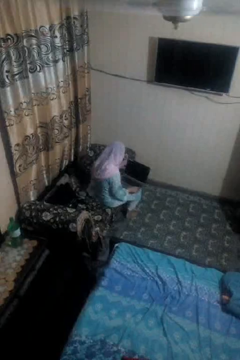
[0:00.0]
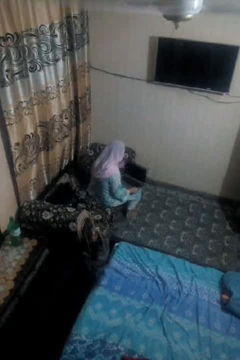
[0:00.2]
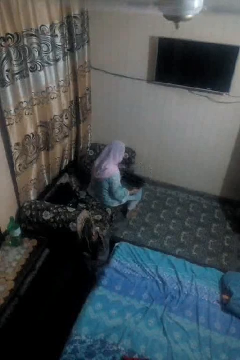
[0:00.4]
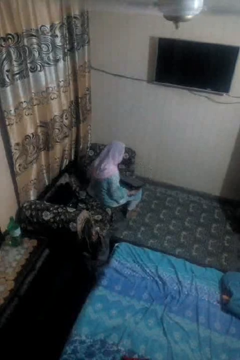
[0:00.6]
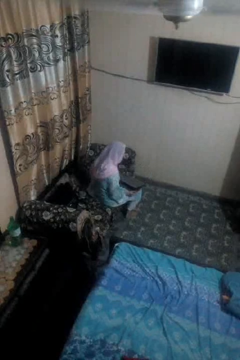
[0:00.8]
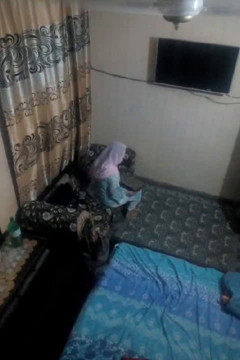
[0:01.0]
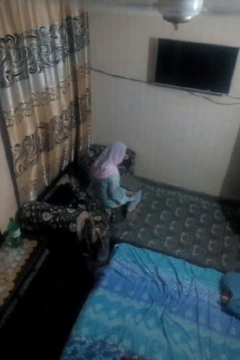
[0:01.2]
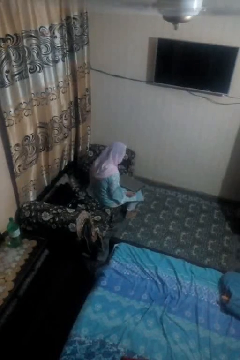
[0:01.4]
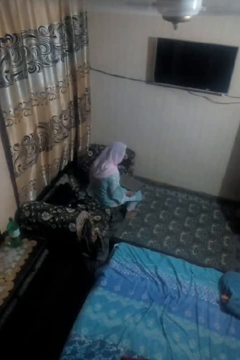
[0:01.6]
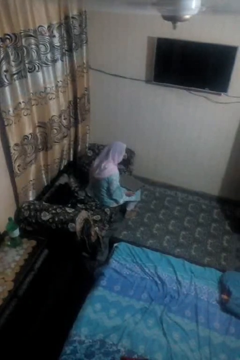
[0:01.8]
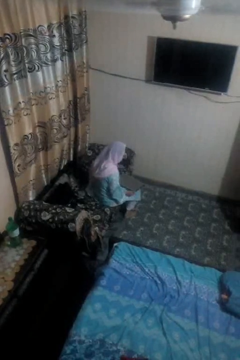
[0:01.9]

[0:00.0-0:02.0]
person closes laptop

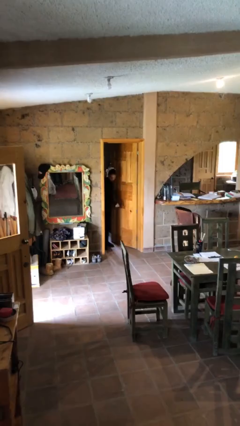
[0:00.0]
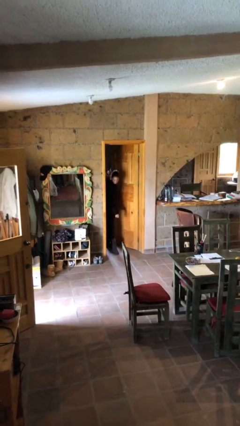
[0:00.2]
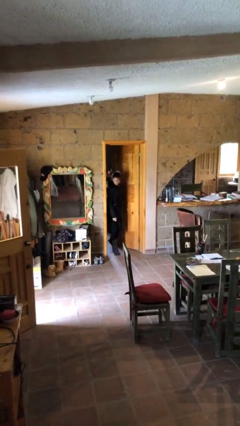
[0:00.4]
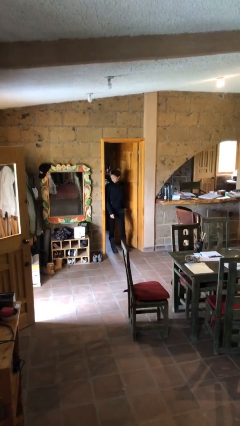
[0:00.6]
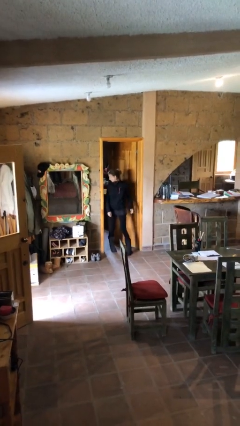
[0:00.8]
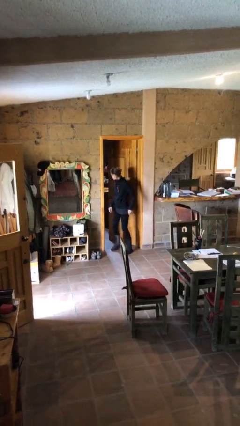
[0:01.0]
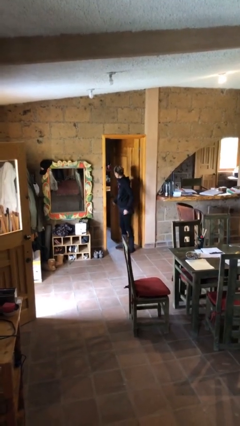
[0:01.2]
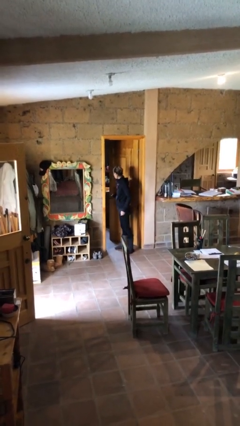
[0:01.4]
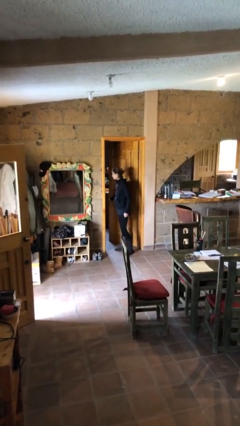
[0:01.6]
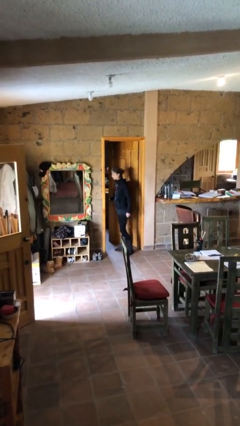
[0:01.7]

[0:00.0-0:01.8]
person enters scene through structure

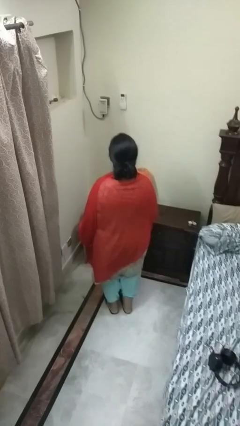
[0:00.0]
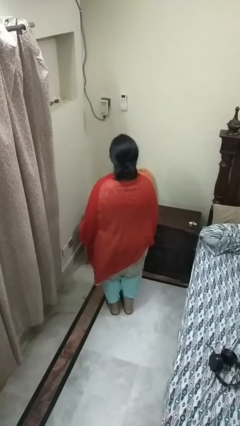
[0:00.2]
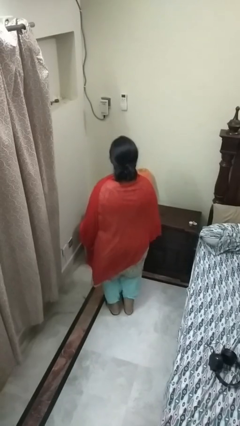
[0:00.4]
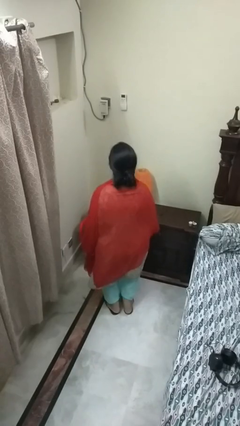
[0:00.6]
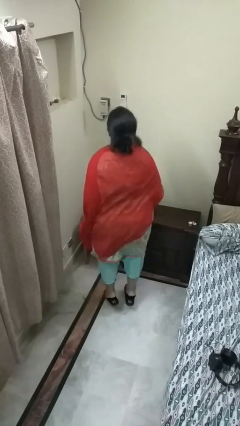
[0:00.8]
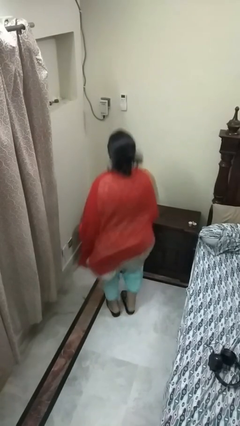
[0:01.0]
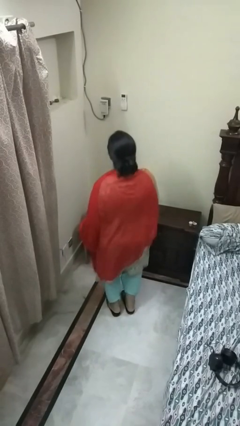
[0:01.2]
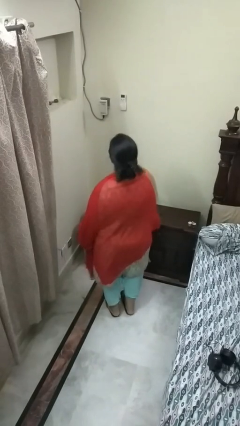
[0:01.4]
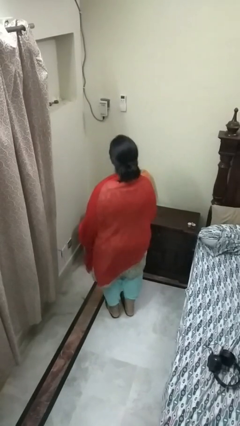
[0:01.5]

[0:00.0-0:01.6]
person jumps

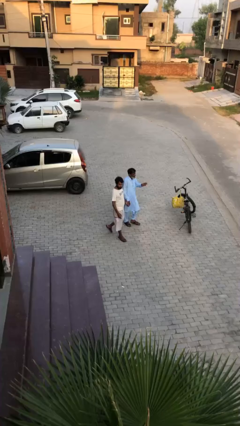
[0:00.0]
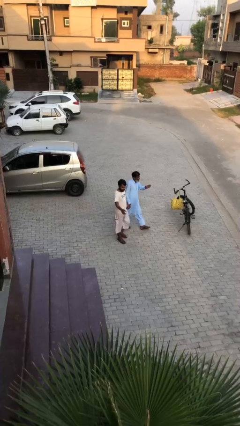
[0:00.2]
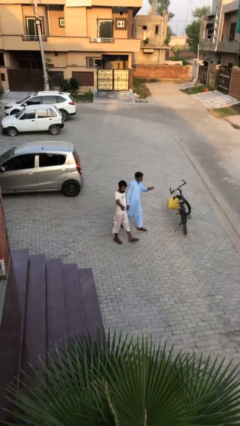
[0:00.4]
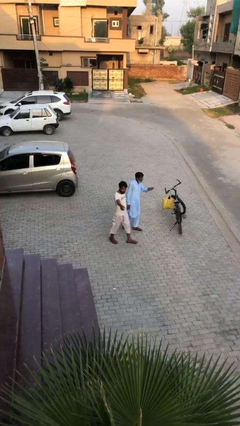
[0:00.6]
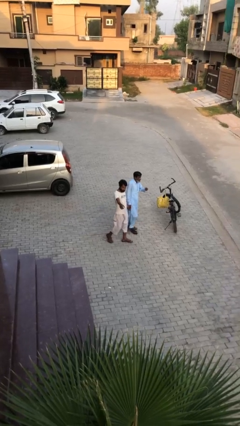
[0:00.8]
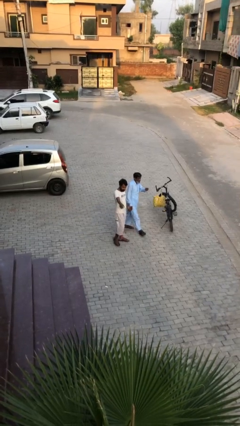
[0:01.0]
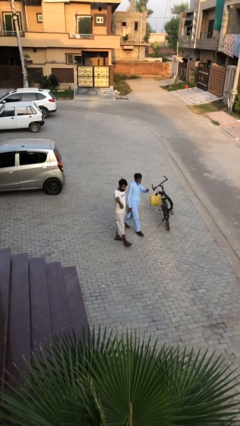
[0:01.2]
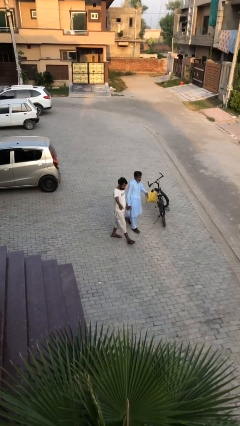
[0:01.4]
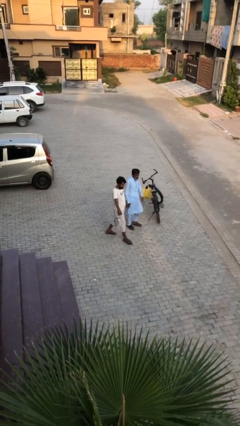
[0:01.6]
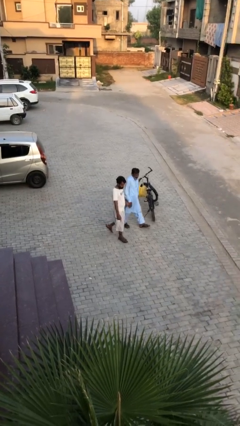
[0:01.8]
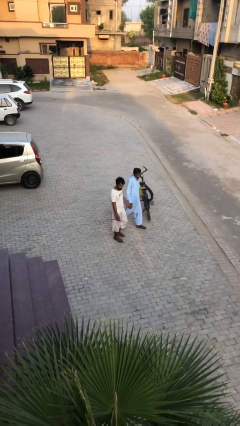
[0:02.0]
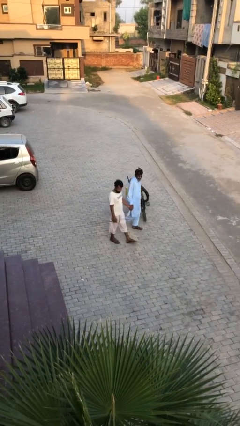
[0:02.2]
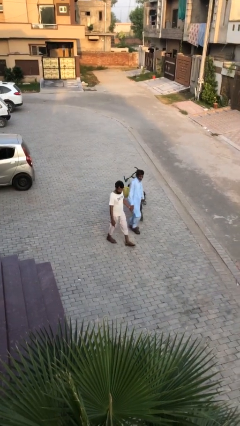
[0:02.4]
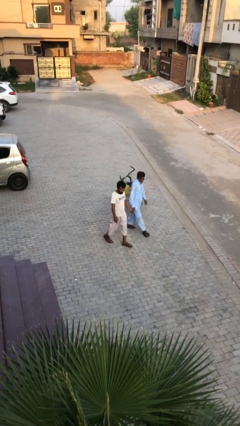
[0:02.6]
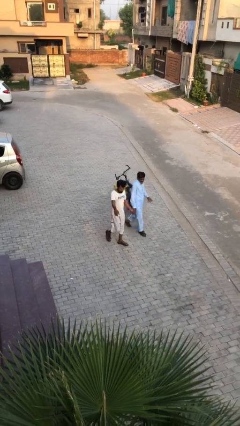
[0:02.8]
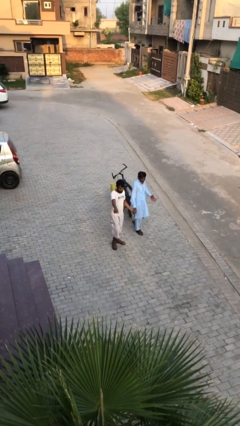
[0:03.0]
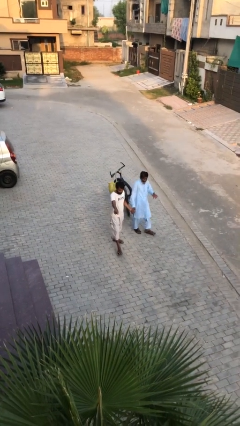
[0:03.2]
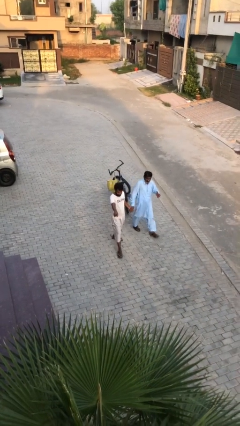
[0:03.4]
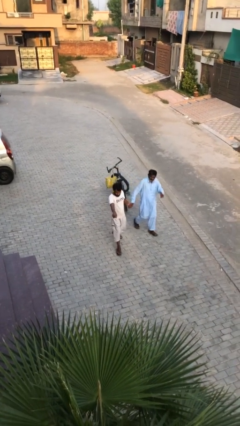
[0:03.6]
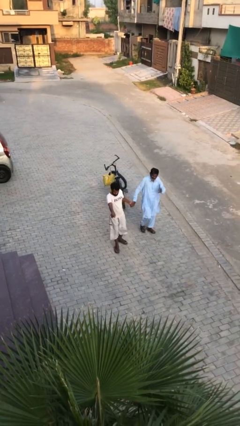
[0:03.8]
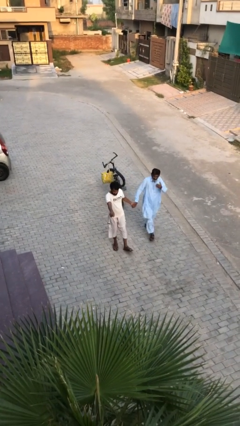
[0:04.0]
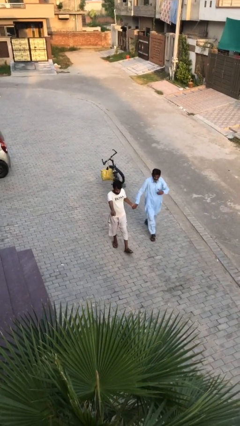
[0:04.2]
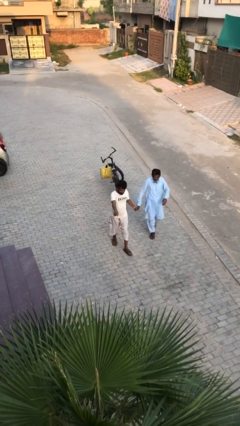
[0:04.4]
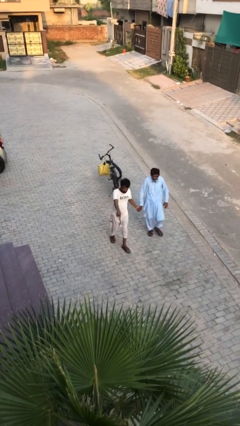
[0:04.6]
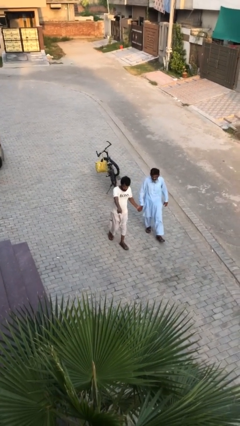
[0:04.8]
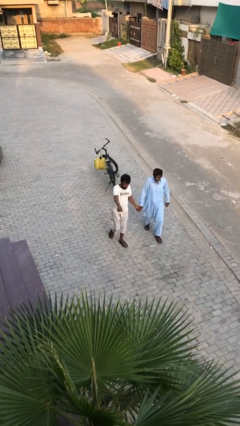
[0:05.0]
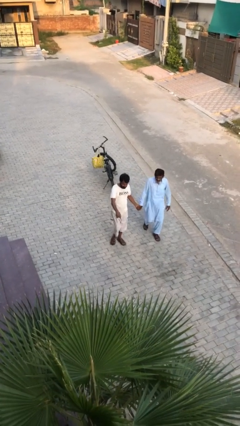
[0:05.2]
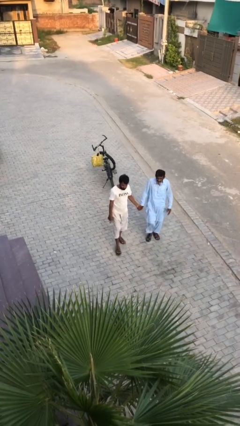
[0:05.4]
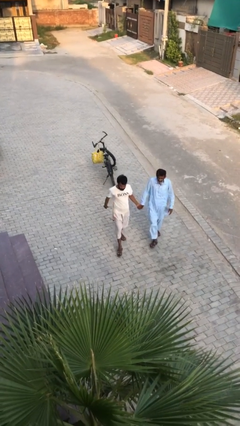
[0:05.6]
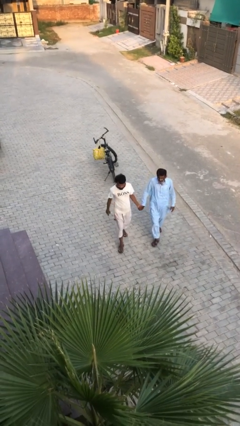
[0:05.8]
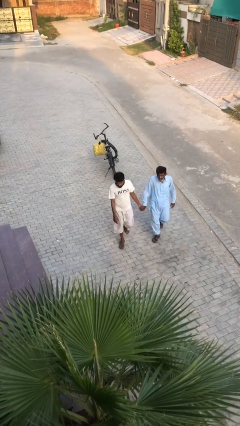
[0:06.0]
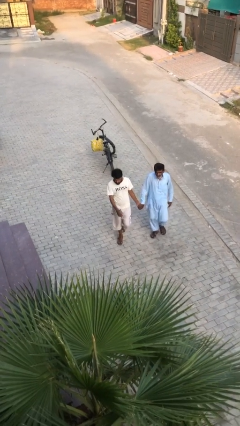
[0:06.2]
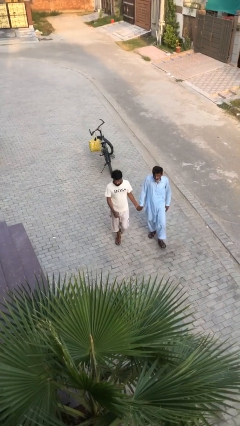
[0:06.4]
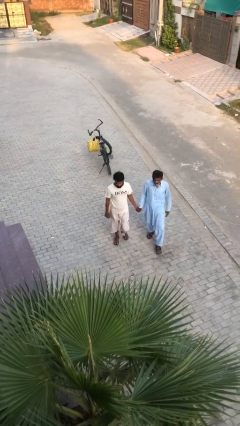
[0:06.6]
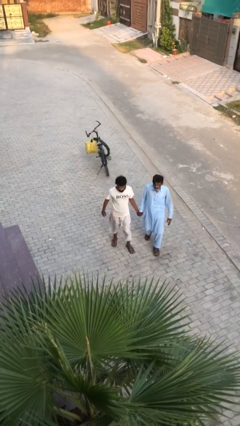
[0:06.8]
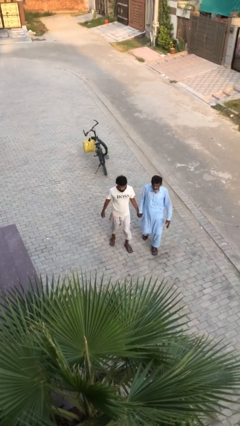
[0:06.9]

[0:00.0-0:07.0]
person holds hand

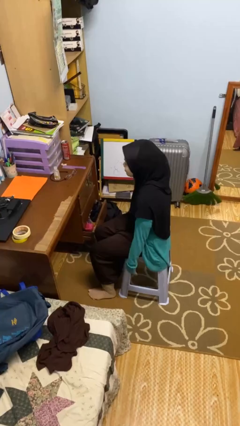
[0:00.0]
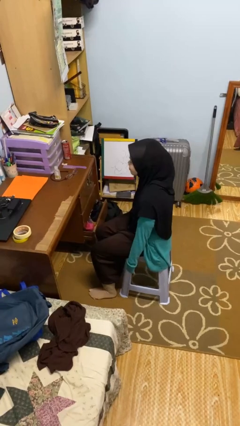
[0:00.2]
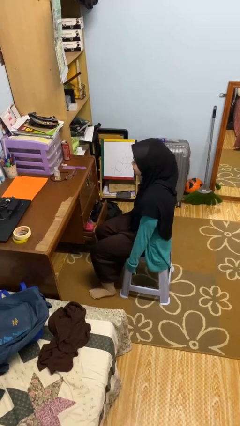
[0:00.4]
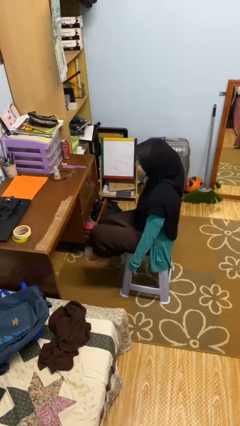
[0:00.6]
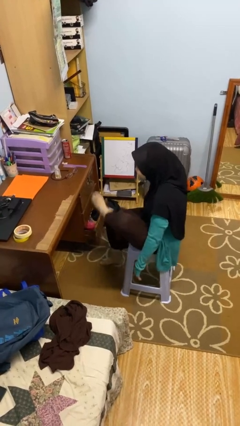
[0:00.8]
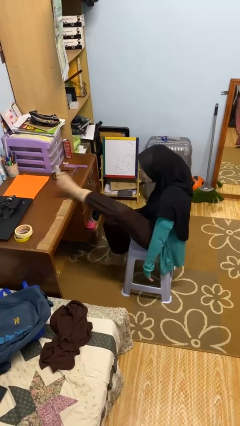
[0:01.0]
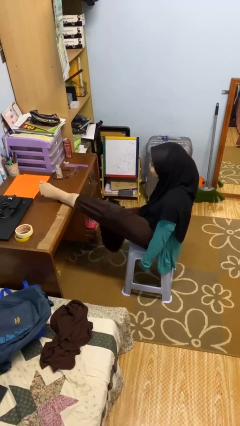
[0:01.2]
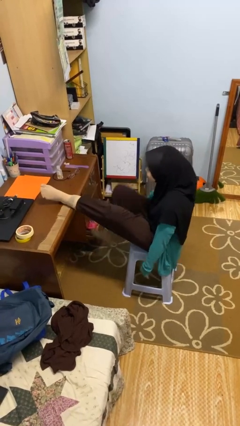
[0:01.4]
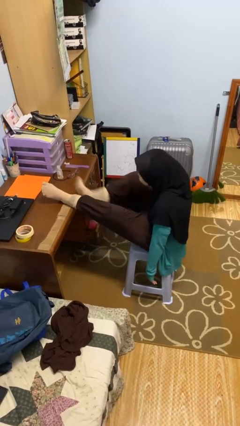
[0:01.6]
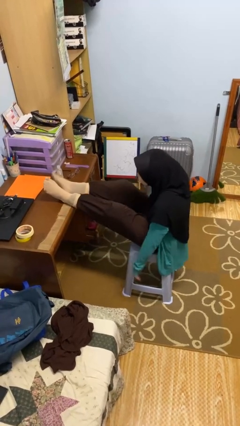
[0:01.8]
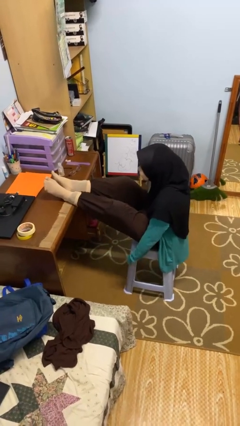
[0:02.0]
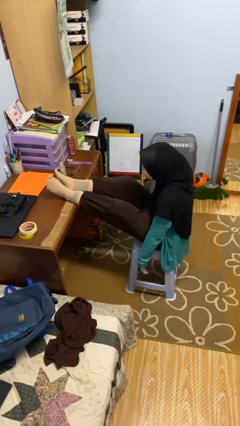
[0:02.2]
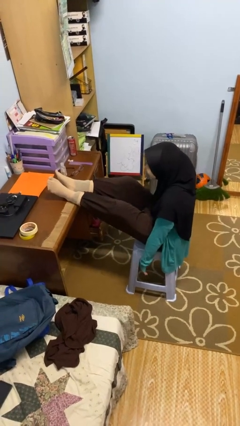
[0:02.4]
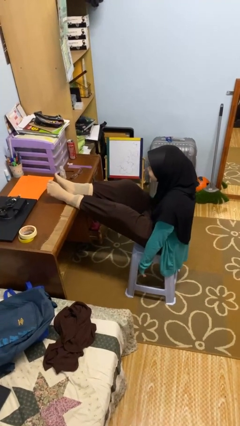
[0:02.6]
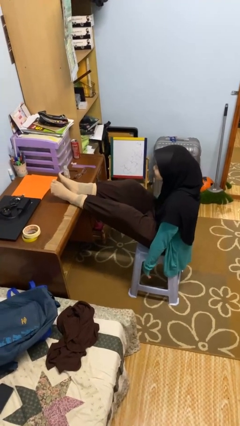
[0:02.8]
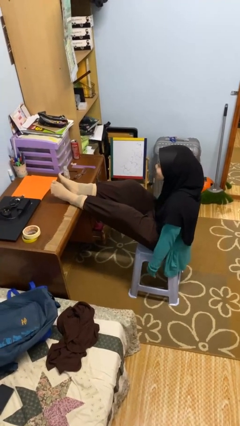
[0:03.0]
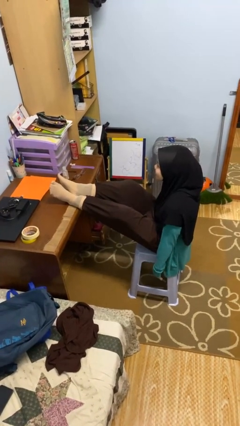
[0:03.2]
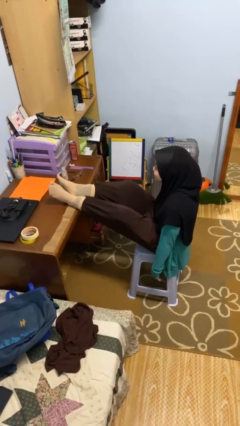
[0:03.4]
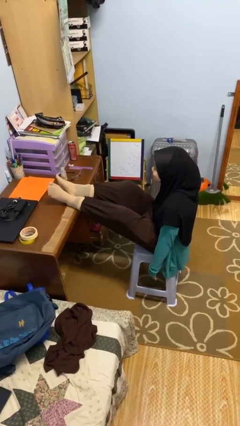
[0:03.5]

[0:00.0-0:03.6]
person puts feet up

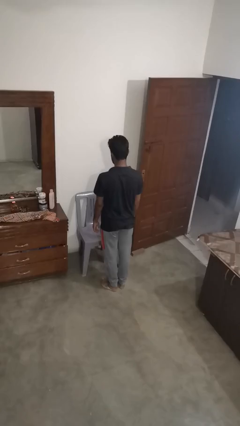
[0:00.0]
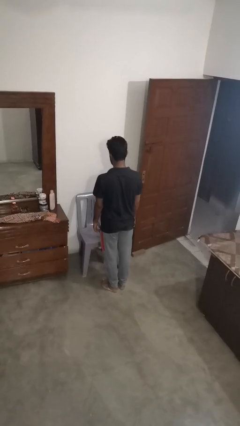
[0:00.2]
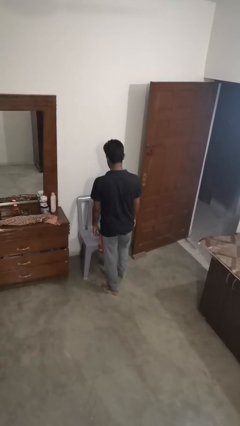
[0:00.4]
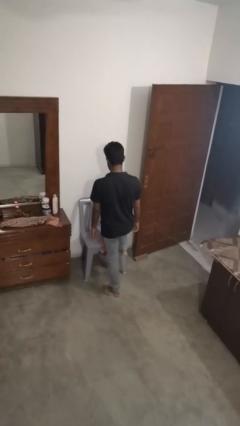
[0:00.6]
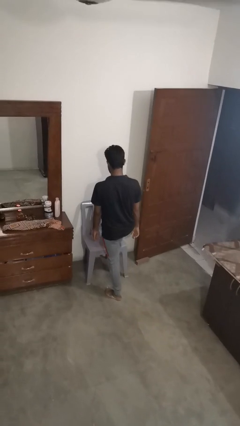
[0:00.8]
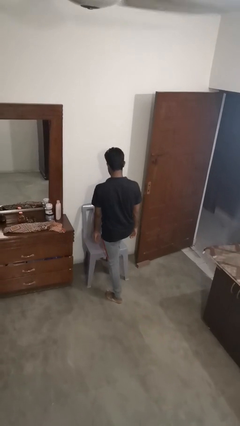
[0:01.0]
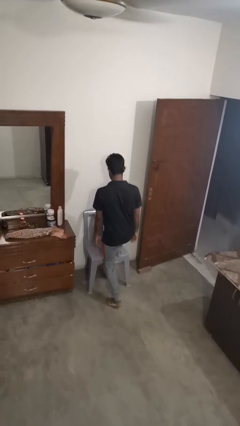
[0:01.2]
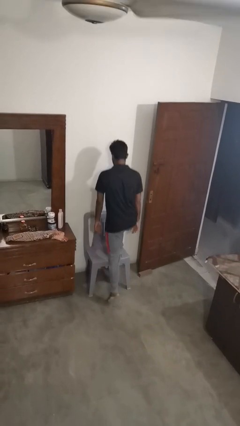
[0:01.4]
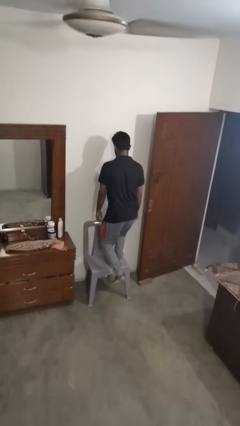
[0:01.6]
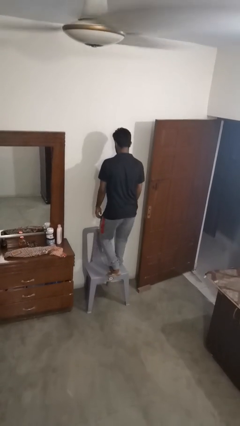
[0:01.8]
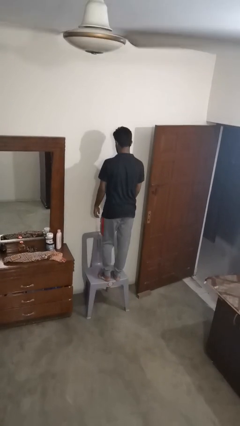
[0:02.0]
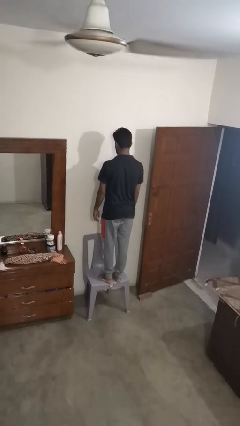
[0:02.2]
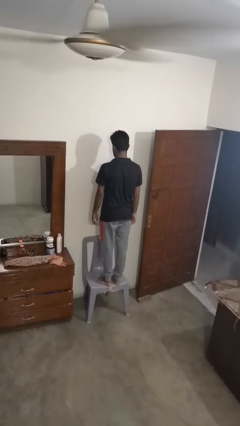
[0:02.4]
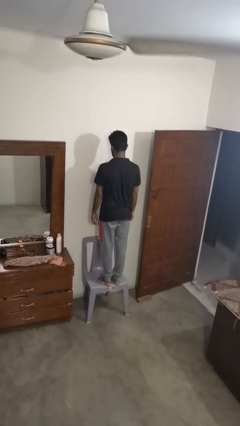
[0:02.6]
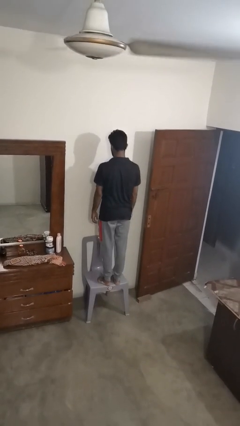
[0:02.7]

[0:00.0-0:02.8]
person climbs on chair
